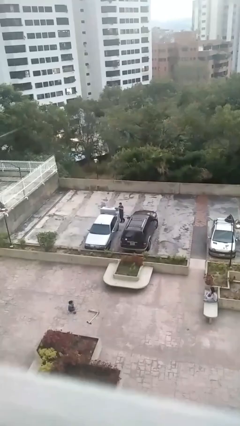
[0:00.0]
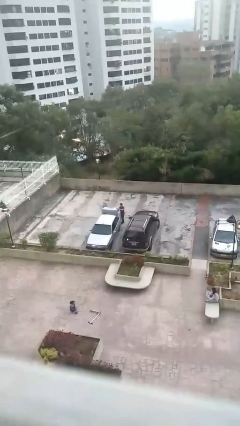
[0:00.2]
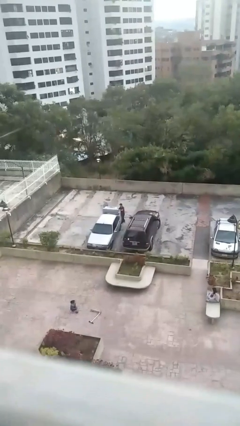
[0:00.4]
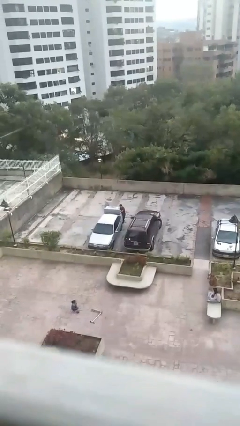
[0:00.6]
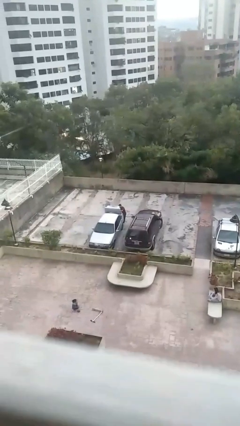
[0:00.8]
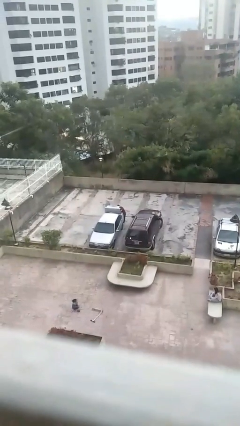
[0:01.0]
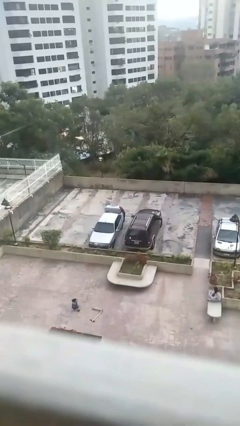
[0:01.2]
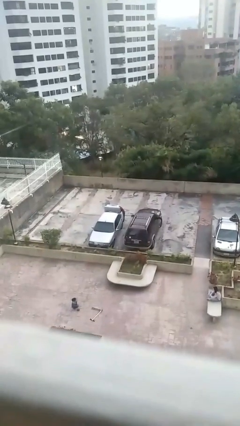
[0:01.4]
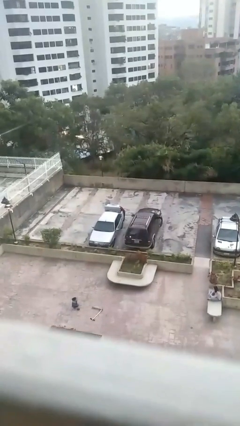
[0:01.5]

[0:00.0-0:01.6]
person loads car

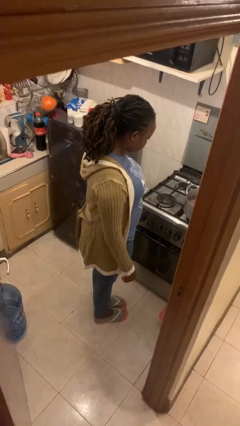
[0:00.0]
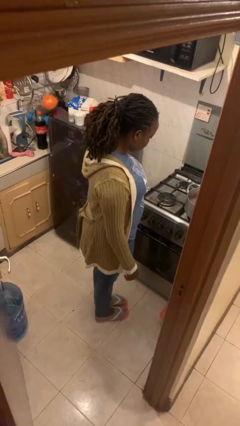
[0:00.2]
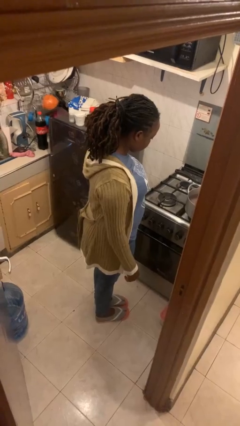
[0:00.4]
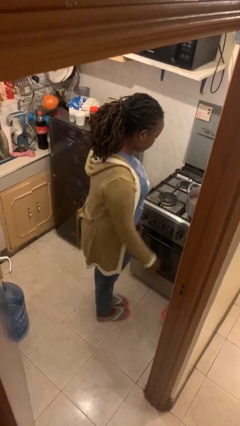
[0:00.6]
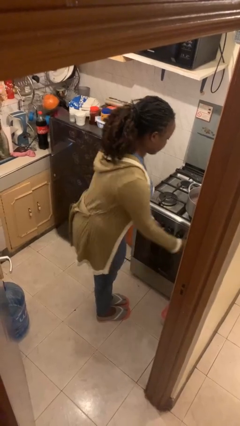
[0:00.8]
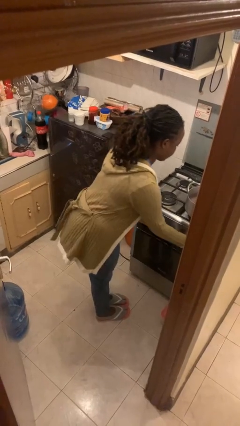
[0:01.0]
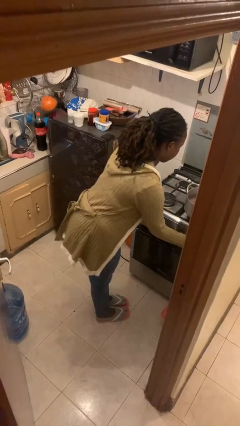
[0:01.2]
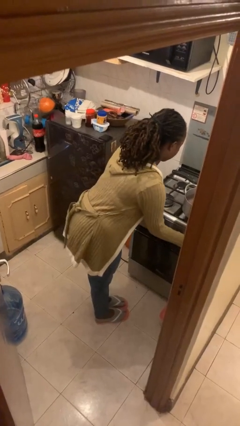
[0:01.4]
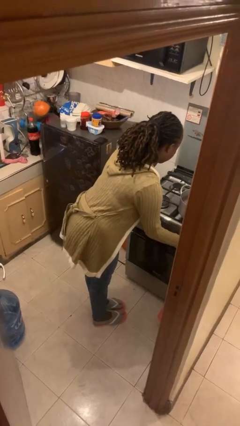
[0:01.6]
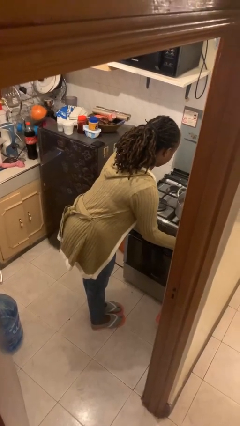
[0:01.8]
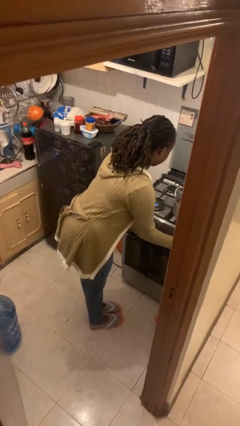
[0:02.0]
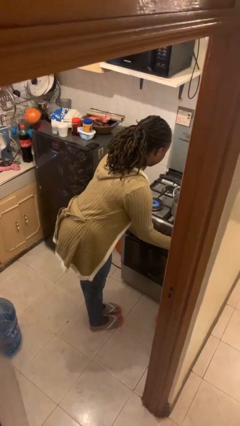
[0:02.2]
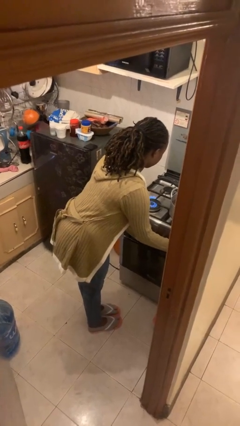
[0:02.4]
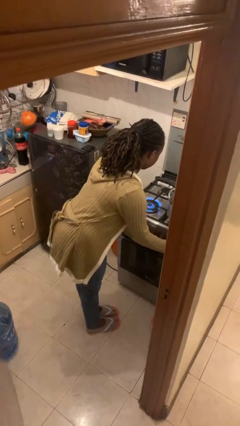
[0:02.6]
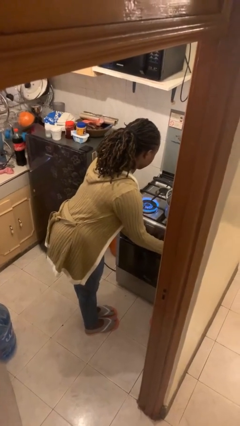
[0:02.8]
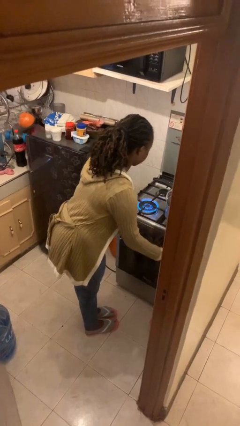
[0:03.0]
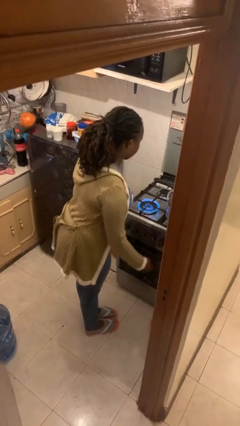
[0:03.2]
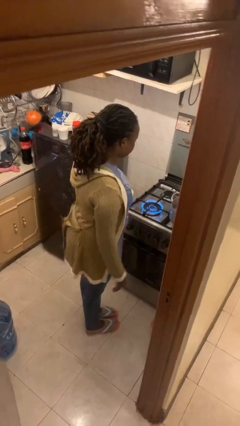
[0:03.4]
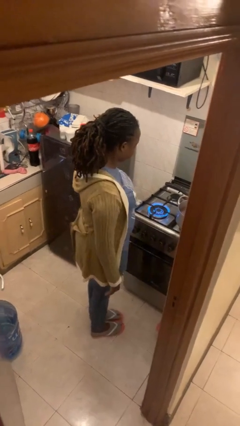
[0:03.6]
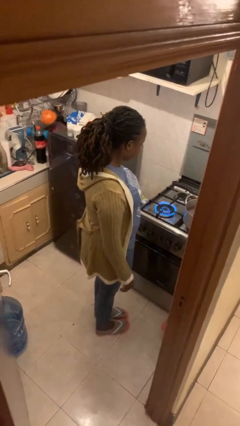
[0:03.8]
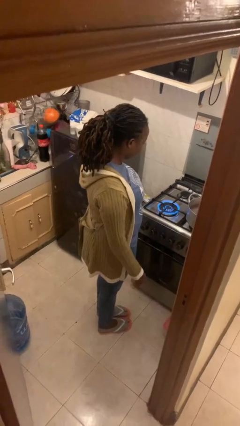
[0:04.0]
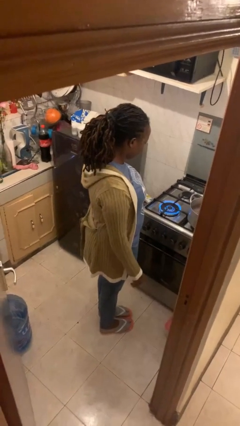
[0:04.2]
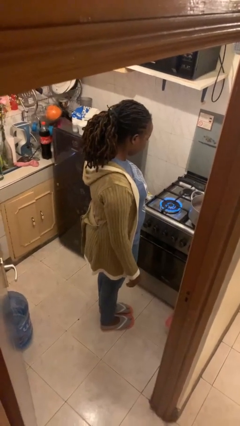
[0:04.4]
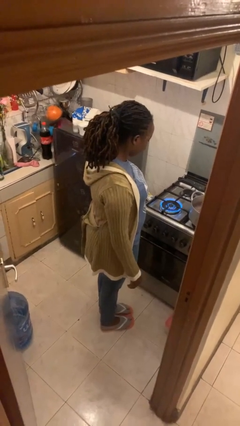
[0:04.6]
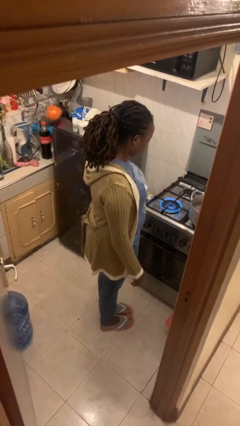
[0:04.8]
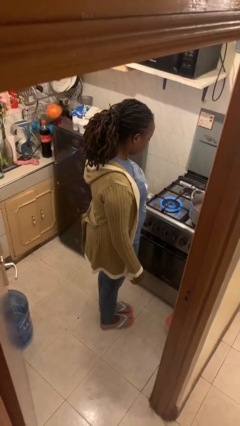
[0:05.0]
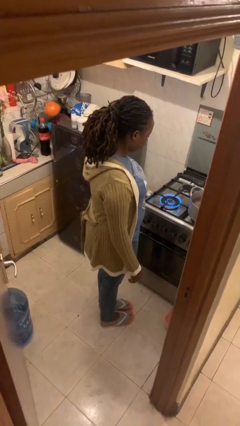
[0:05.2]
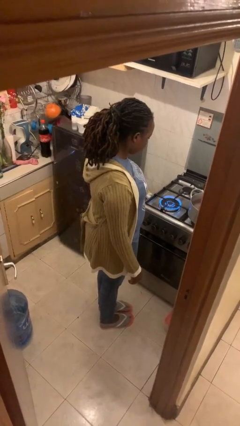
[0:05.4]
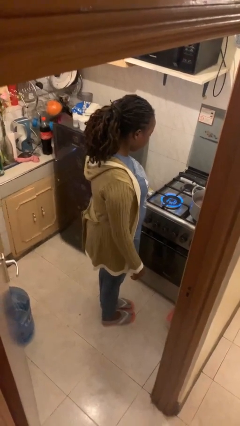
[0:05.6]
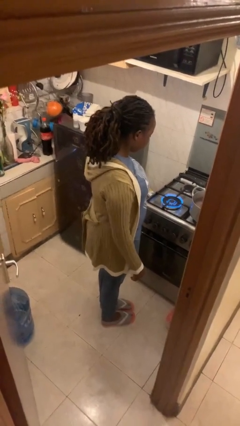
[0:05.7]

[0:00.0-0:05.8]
person turns on stovetop

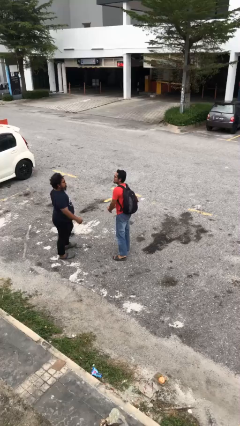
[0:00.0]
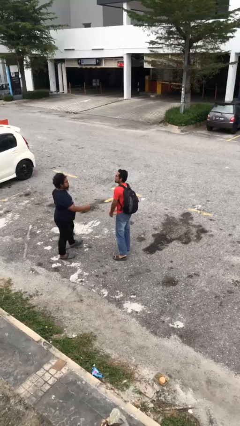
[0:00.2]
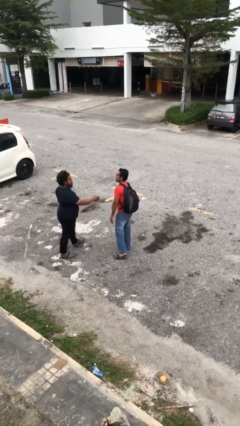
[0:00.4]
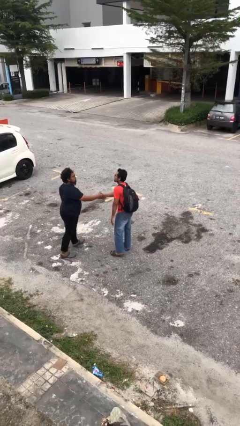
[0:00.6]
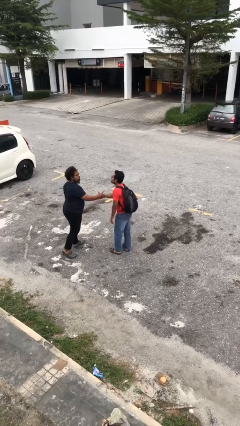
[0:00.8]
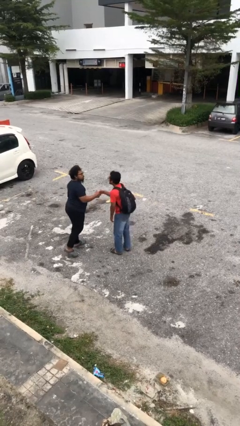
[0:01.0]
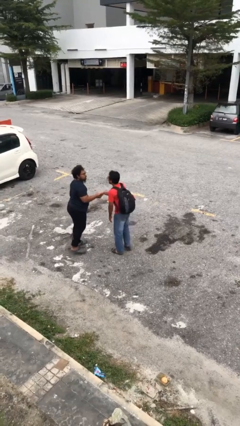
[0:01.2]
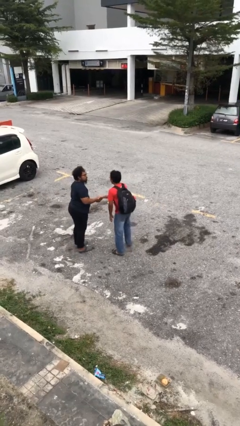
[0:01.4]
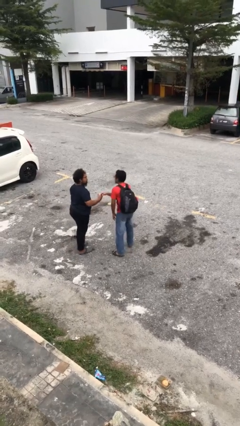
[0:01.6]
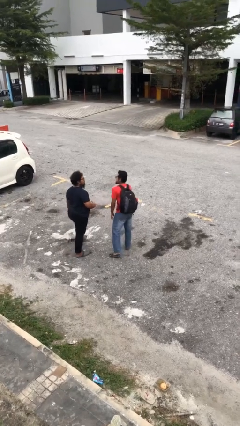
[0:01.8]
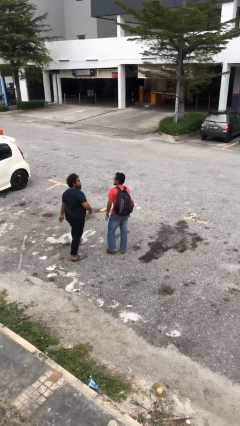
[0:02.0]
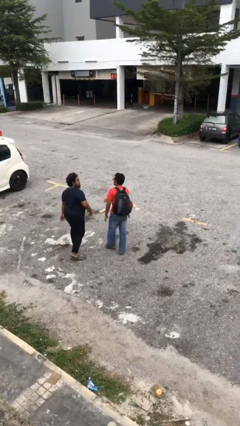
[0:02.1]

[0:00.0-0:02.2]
person shakes hand

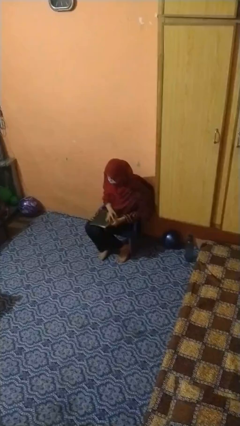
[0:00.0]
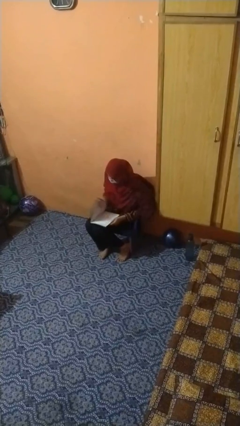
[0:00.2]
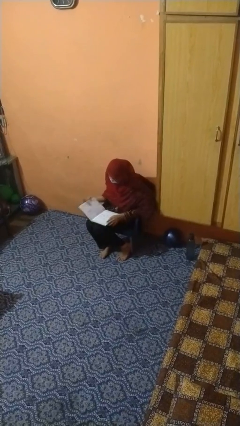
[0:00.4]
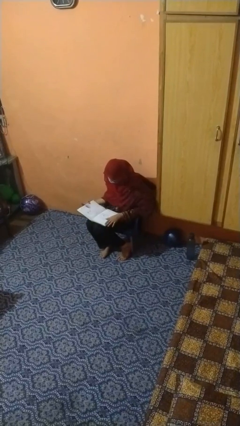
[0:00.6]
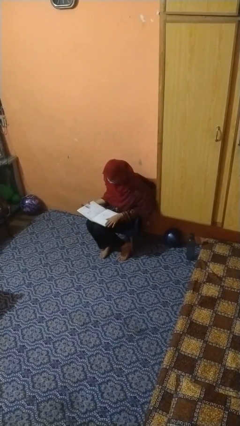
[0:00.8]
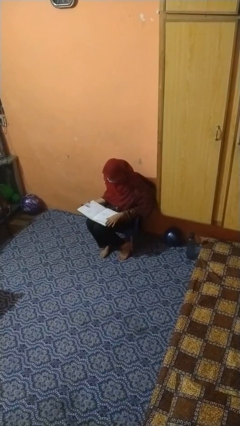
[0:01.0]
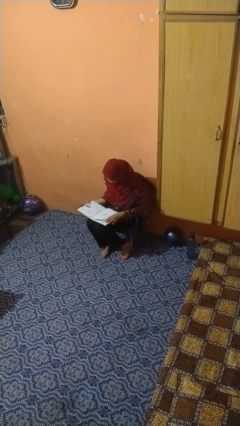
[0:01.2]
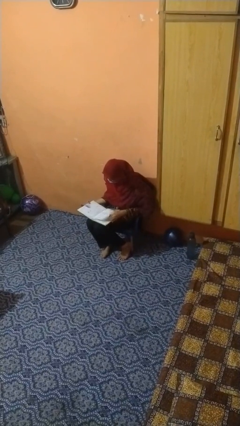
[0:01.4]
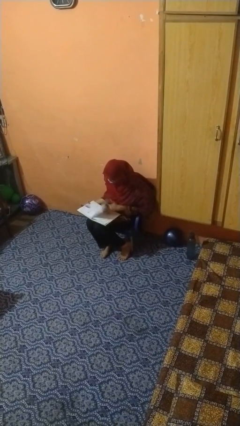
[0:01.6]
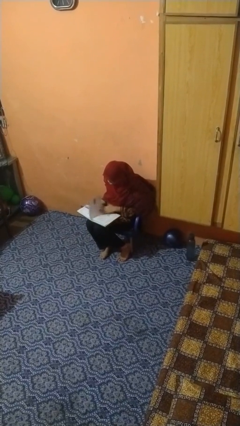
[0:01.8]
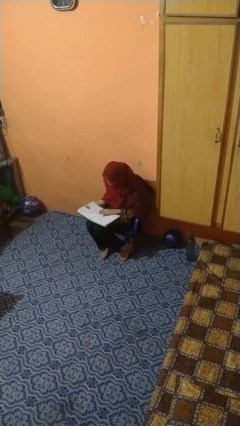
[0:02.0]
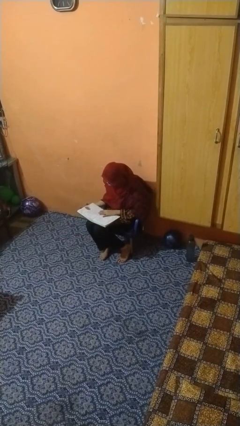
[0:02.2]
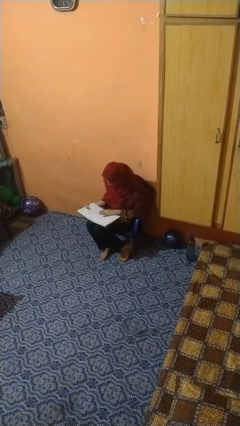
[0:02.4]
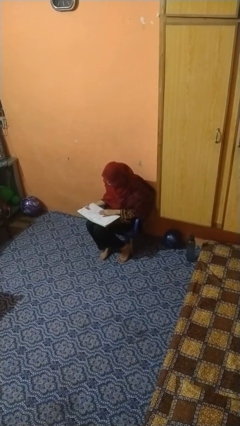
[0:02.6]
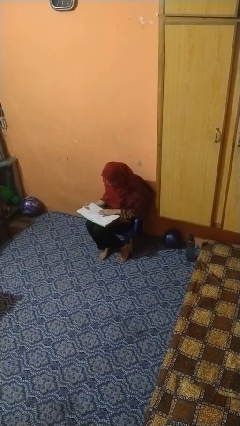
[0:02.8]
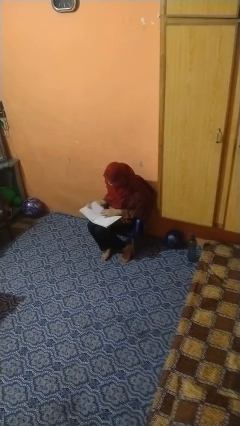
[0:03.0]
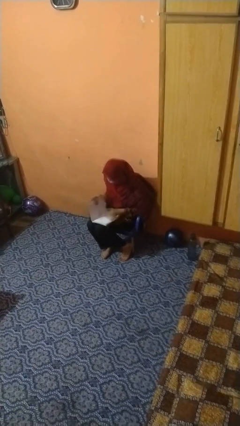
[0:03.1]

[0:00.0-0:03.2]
person reads book

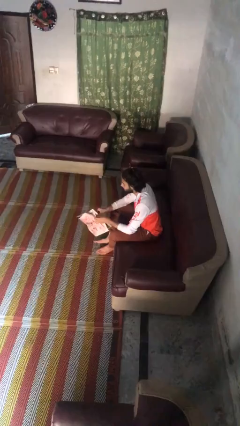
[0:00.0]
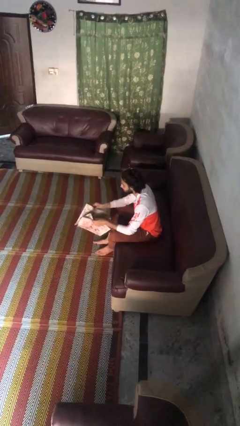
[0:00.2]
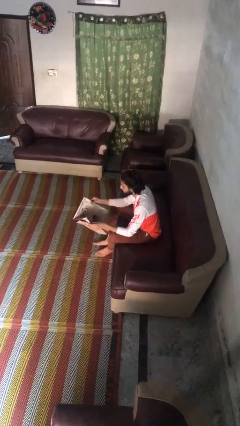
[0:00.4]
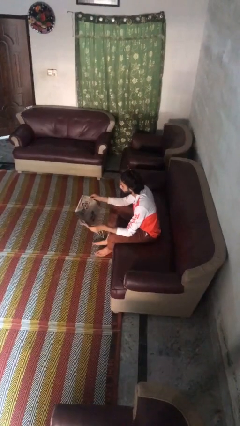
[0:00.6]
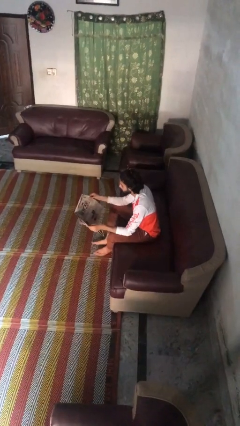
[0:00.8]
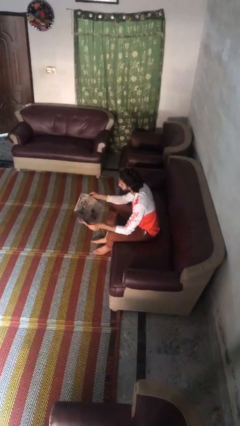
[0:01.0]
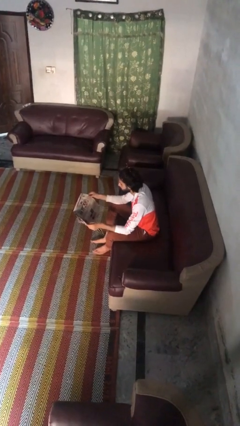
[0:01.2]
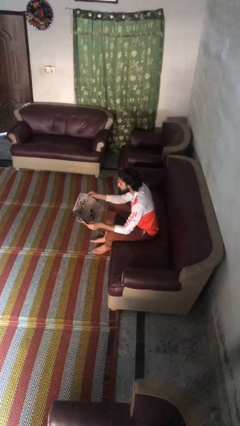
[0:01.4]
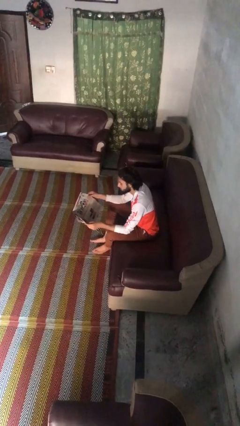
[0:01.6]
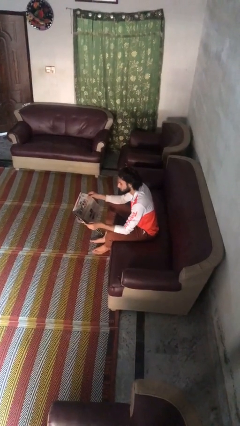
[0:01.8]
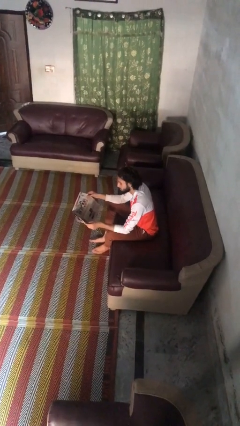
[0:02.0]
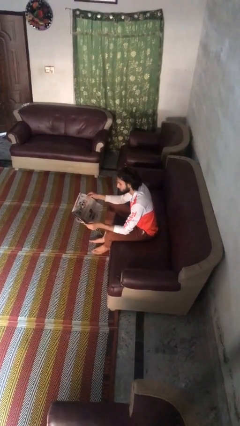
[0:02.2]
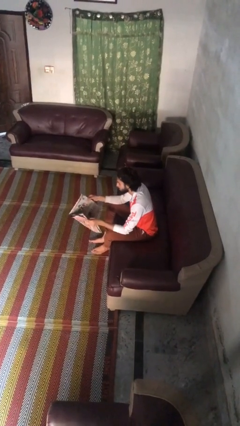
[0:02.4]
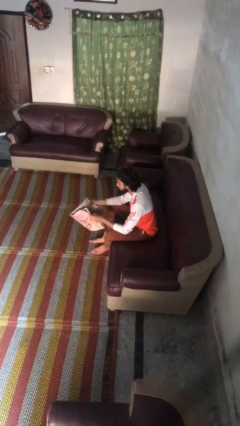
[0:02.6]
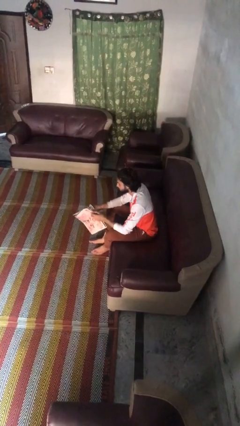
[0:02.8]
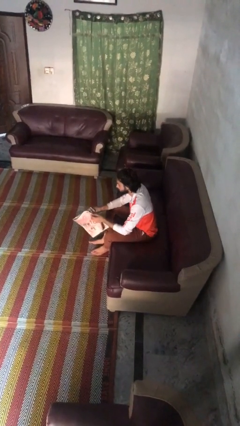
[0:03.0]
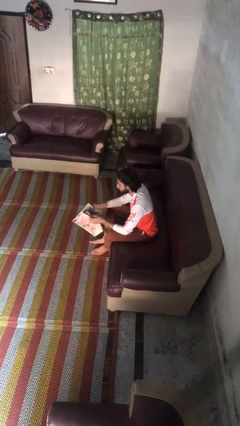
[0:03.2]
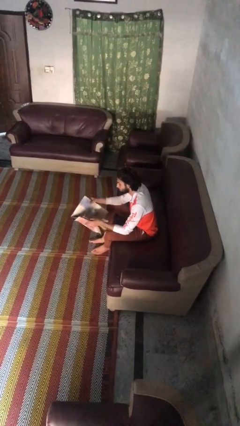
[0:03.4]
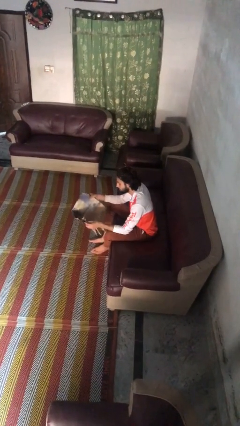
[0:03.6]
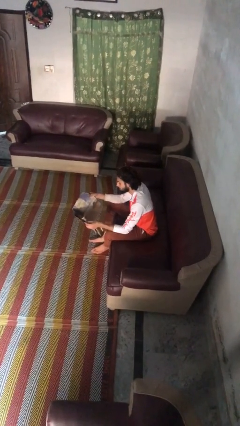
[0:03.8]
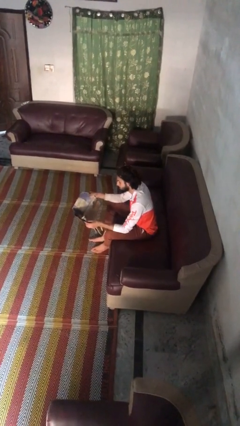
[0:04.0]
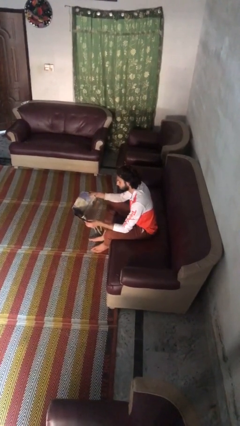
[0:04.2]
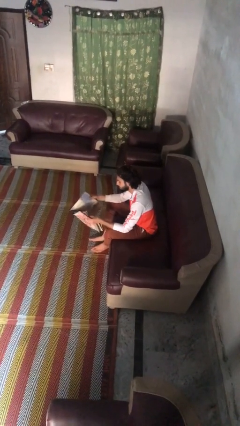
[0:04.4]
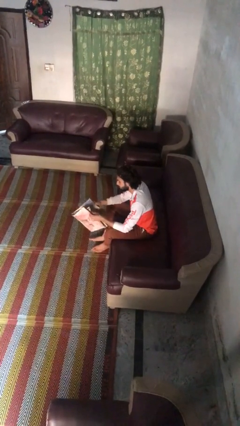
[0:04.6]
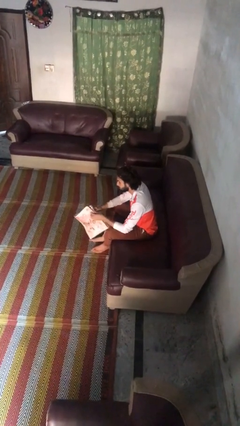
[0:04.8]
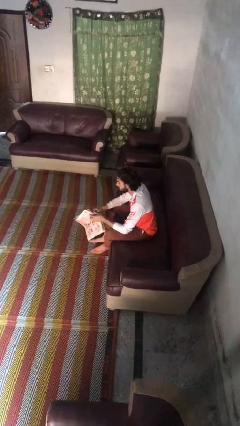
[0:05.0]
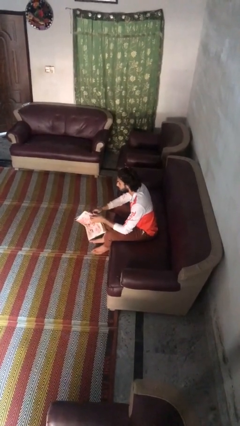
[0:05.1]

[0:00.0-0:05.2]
person reads magazine
